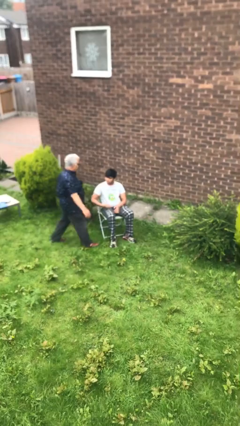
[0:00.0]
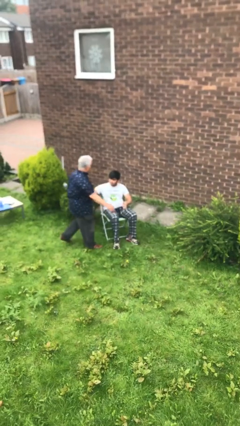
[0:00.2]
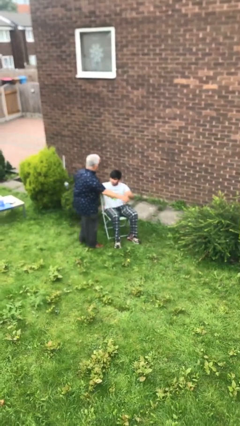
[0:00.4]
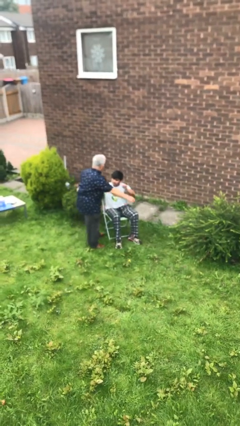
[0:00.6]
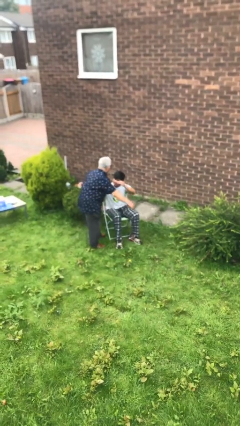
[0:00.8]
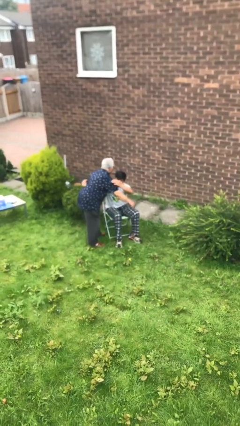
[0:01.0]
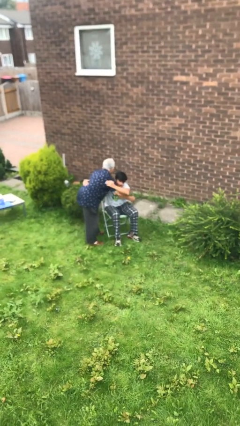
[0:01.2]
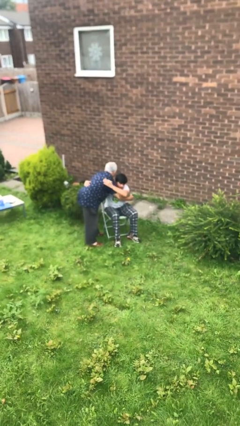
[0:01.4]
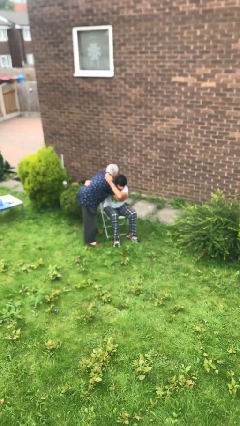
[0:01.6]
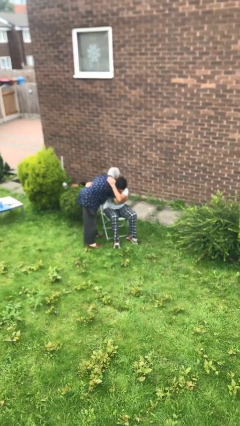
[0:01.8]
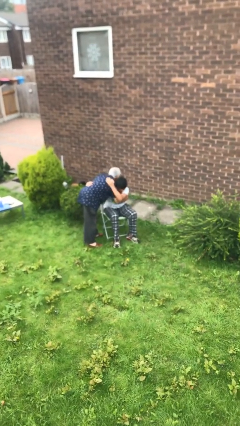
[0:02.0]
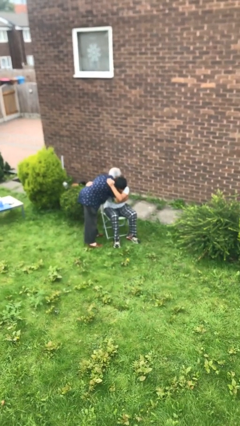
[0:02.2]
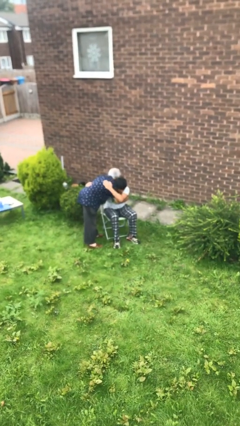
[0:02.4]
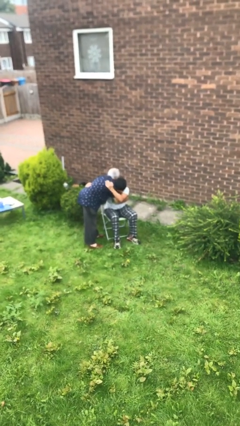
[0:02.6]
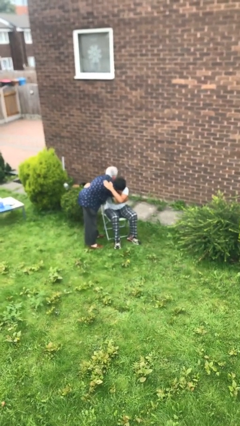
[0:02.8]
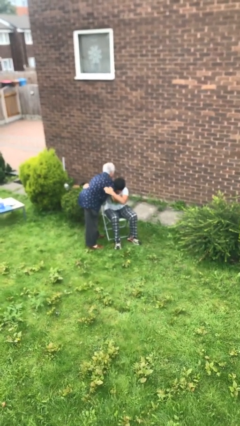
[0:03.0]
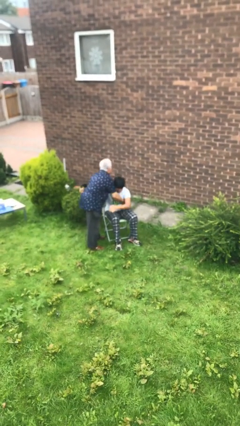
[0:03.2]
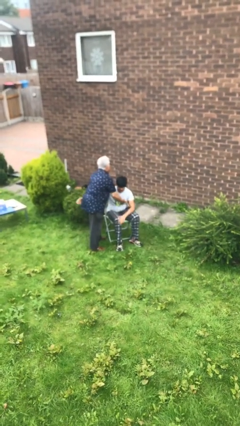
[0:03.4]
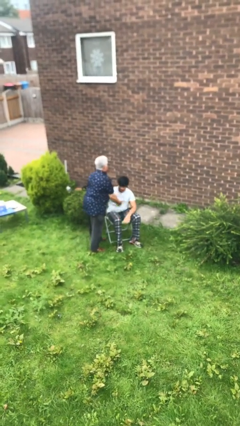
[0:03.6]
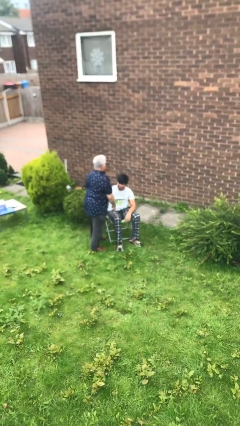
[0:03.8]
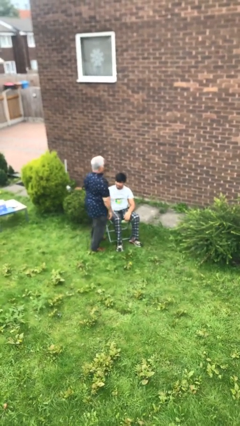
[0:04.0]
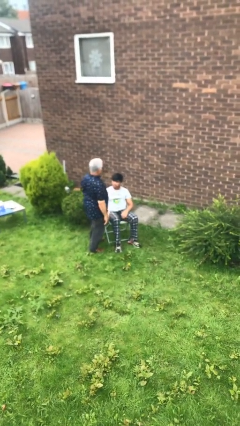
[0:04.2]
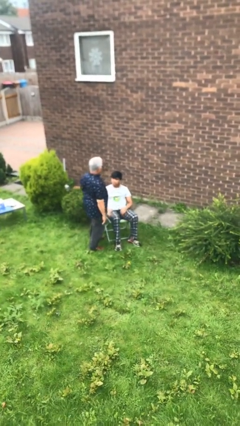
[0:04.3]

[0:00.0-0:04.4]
person embraces person

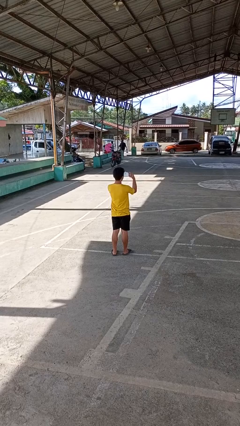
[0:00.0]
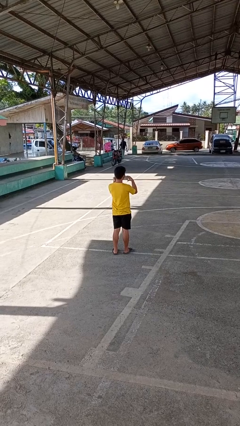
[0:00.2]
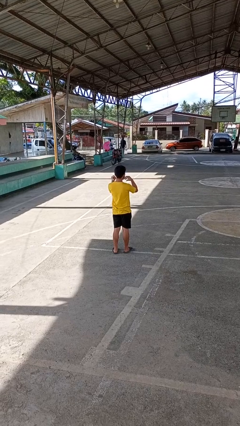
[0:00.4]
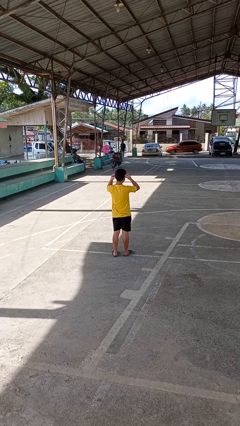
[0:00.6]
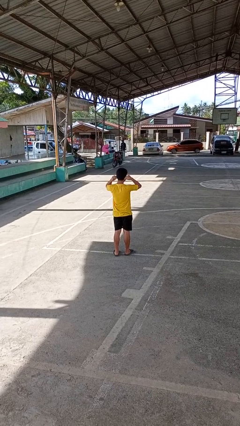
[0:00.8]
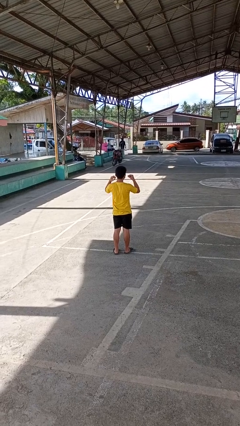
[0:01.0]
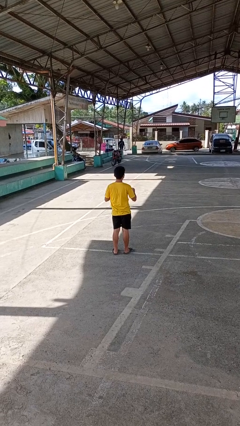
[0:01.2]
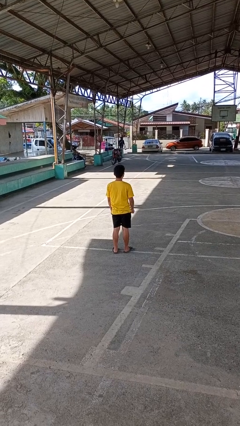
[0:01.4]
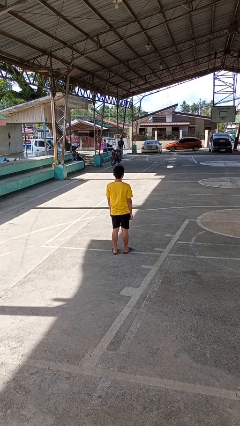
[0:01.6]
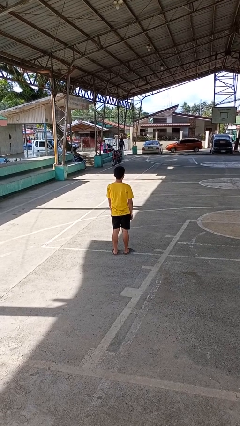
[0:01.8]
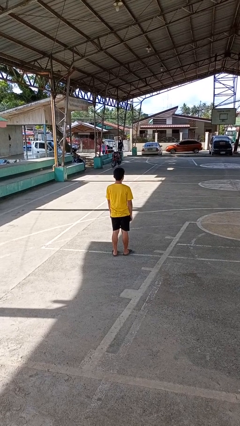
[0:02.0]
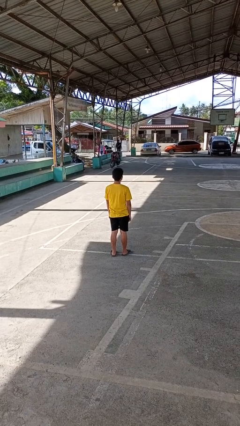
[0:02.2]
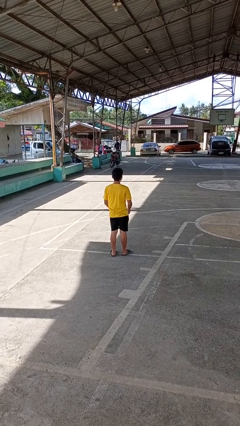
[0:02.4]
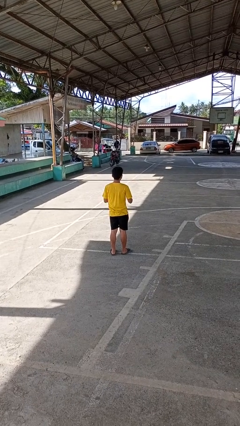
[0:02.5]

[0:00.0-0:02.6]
person puts on facemask

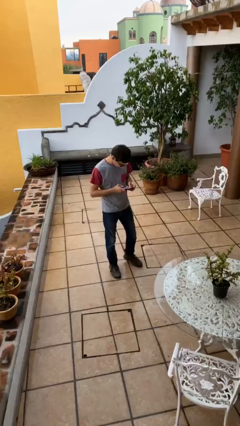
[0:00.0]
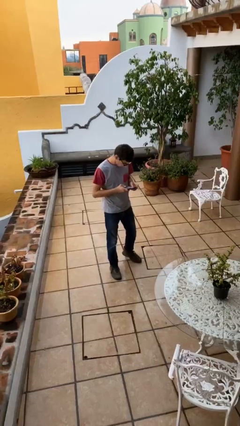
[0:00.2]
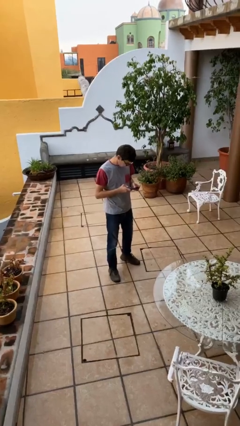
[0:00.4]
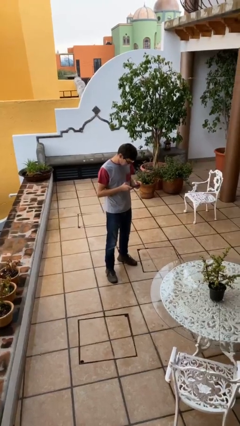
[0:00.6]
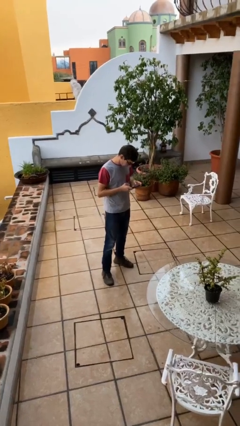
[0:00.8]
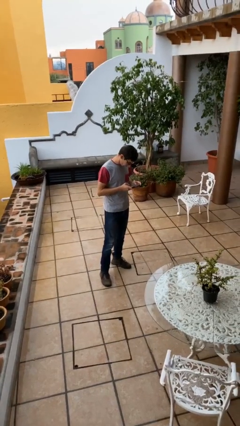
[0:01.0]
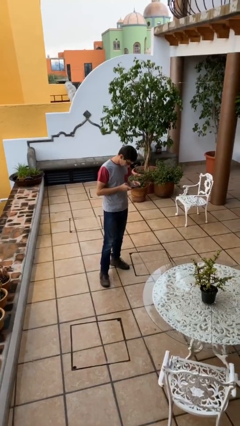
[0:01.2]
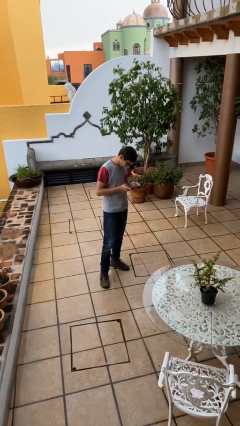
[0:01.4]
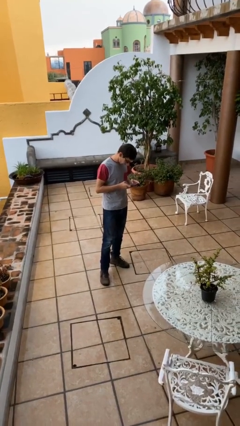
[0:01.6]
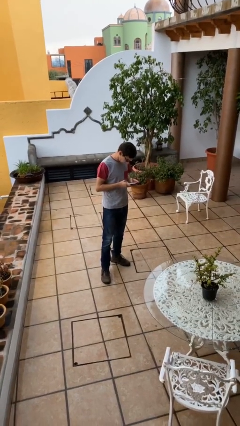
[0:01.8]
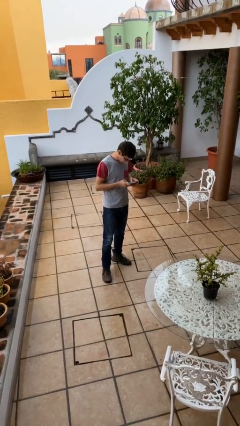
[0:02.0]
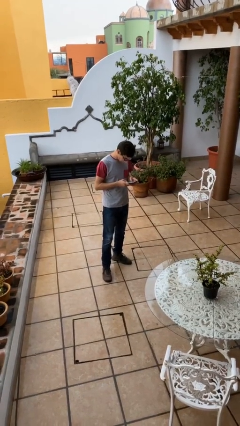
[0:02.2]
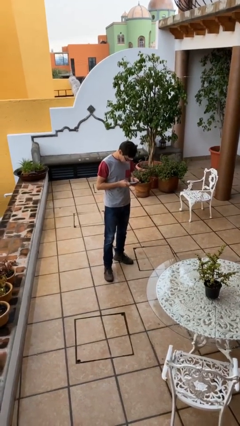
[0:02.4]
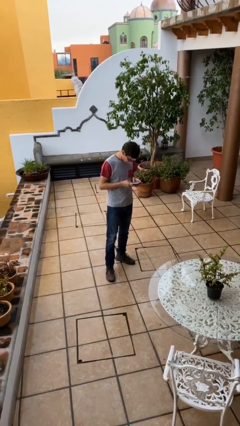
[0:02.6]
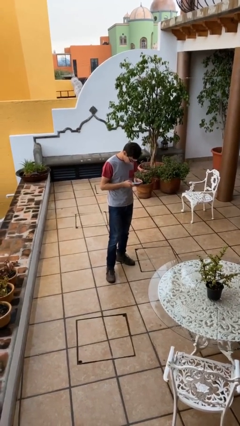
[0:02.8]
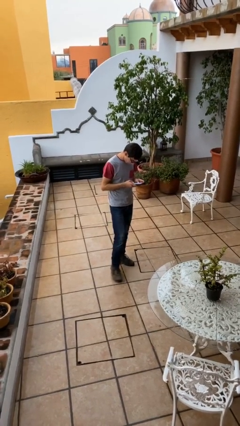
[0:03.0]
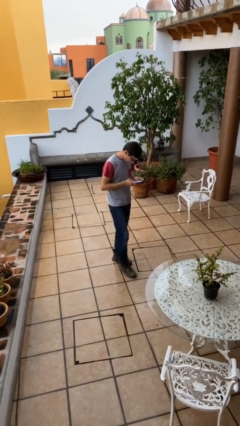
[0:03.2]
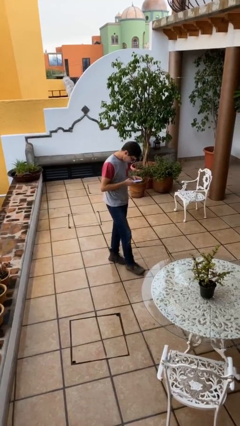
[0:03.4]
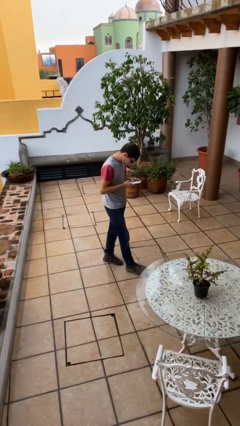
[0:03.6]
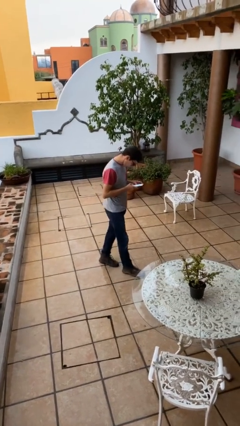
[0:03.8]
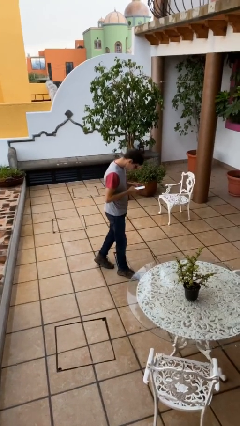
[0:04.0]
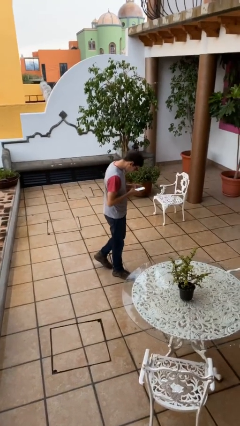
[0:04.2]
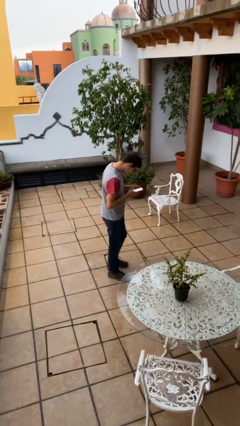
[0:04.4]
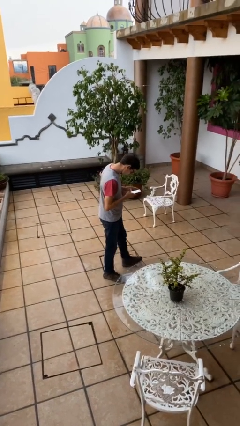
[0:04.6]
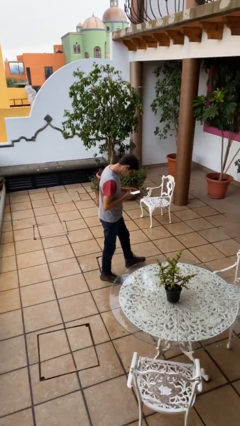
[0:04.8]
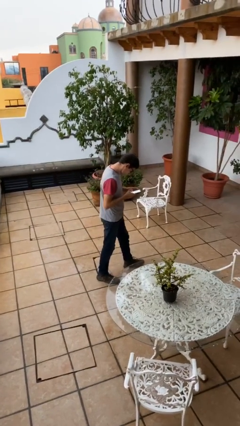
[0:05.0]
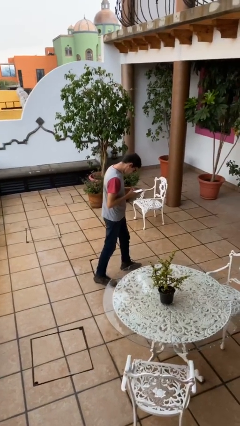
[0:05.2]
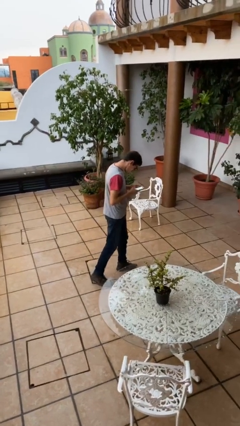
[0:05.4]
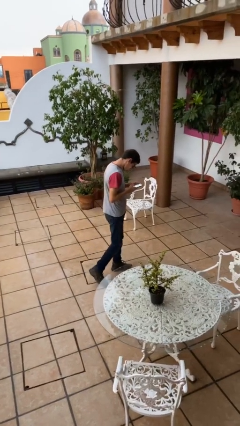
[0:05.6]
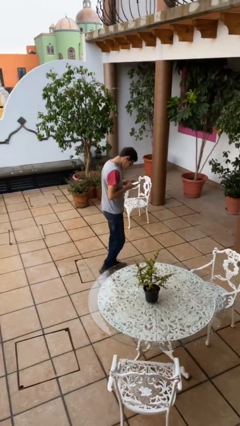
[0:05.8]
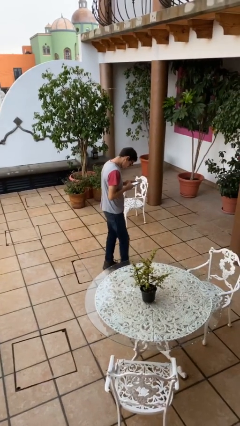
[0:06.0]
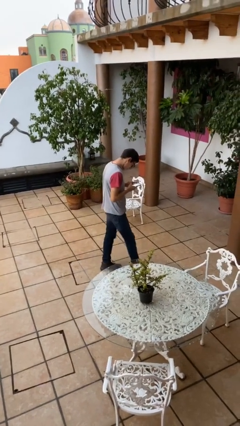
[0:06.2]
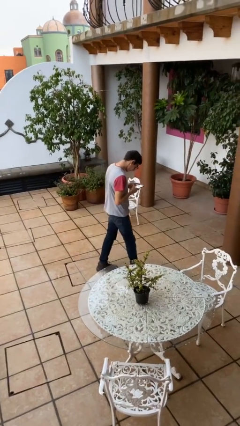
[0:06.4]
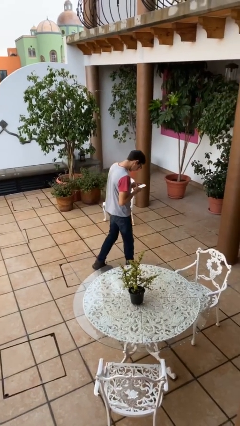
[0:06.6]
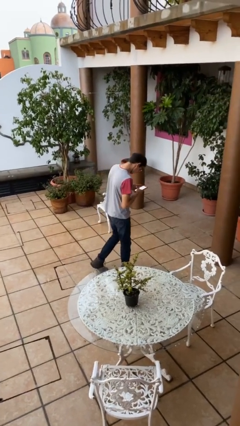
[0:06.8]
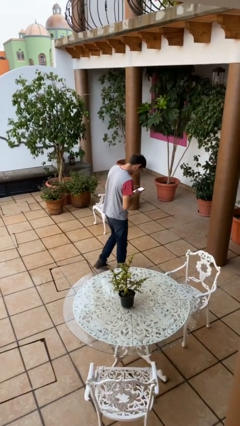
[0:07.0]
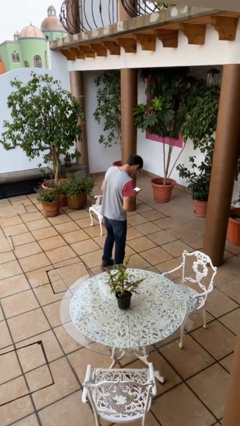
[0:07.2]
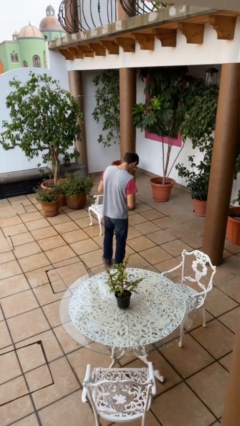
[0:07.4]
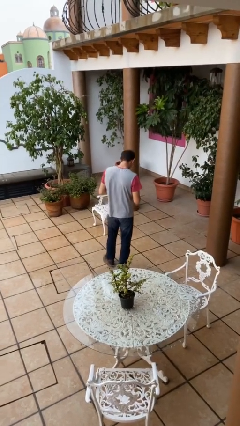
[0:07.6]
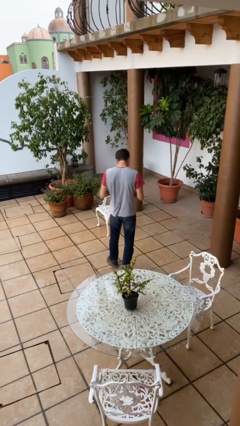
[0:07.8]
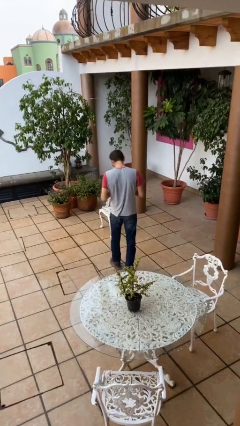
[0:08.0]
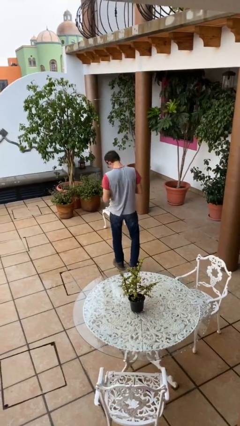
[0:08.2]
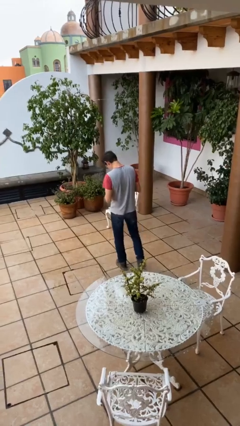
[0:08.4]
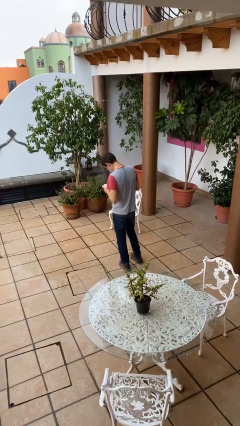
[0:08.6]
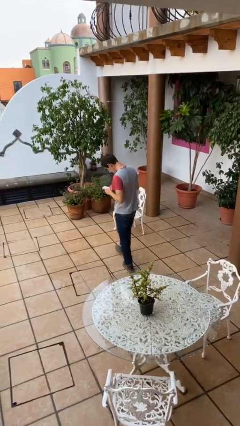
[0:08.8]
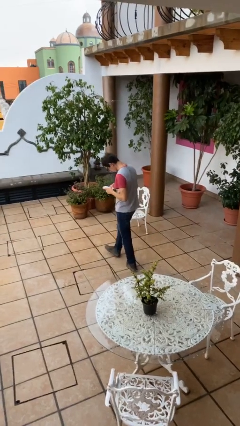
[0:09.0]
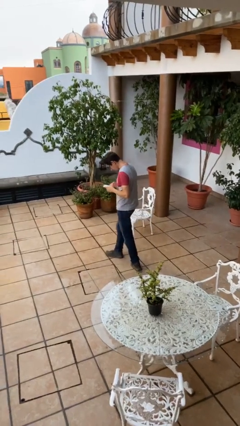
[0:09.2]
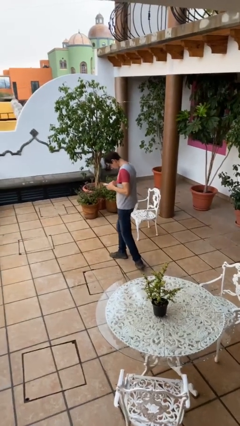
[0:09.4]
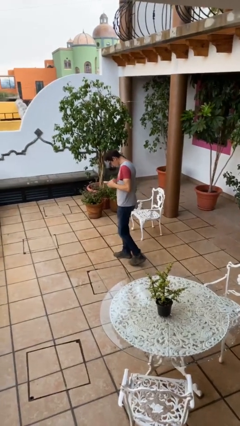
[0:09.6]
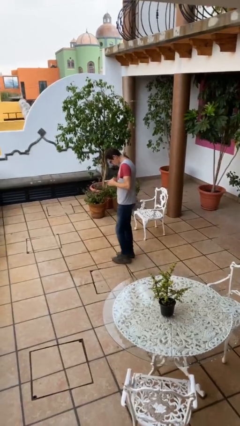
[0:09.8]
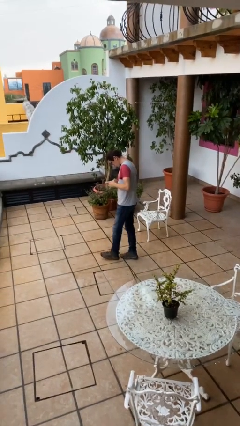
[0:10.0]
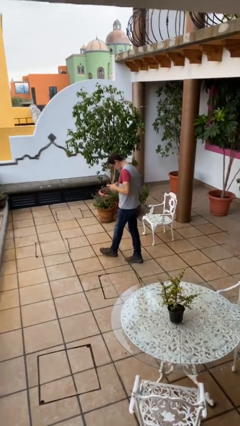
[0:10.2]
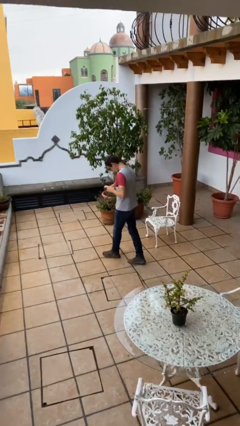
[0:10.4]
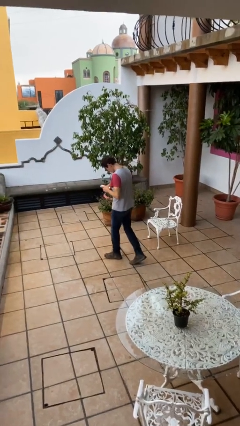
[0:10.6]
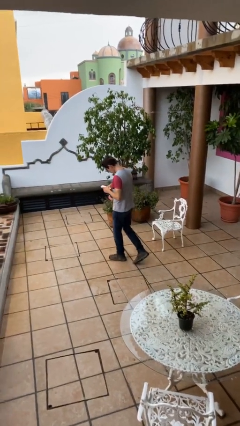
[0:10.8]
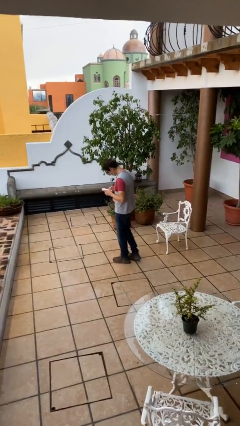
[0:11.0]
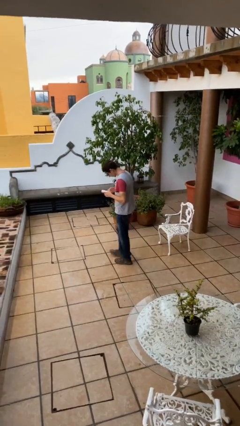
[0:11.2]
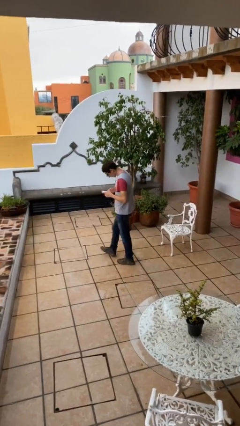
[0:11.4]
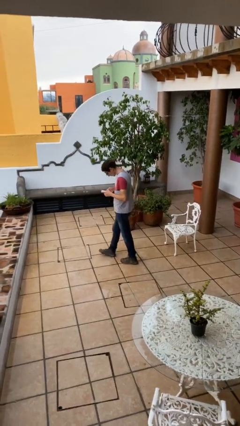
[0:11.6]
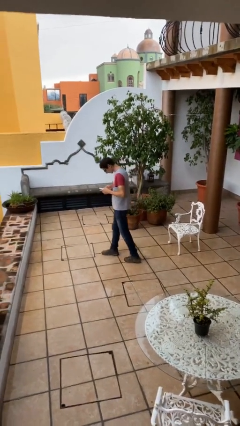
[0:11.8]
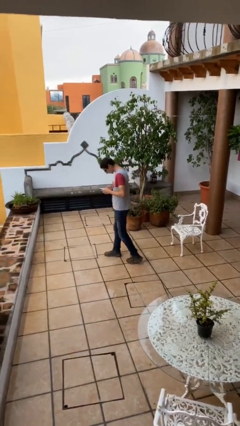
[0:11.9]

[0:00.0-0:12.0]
person texts on phone
